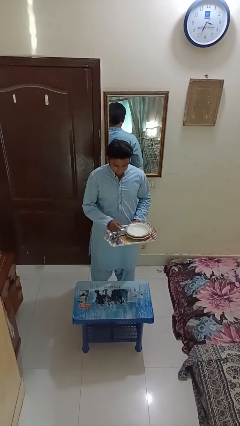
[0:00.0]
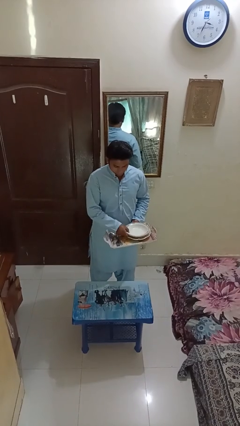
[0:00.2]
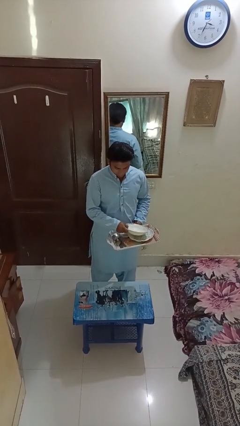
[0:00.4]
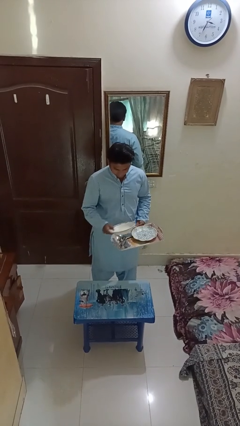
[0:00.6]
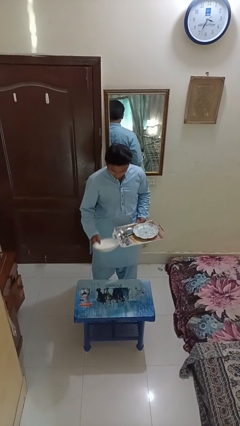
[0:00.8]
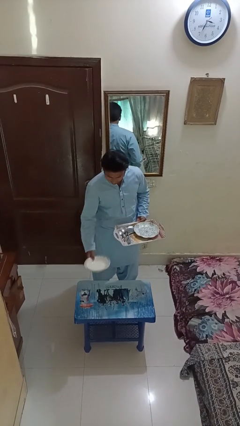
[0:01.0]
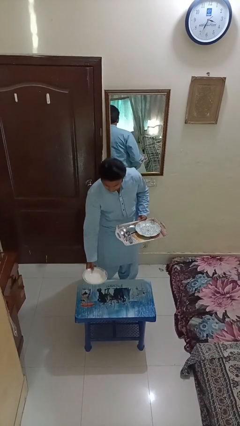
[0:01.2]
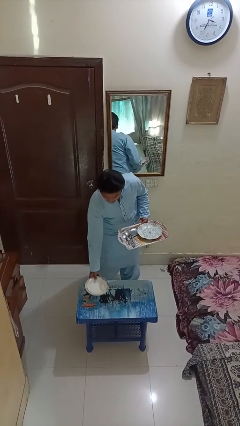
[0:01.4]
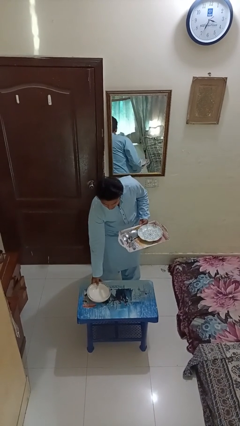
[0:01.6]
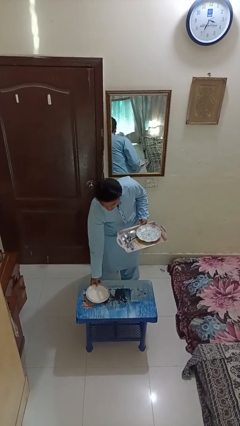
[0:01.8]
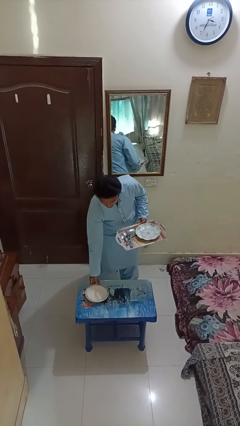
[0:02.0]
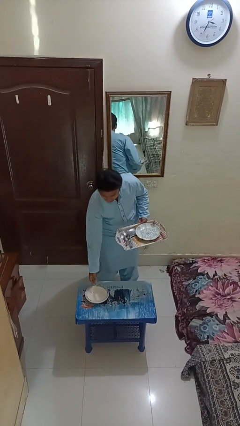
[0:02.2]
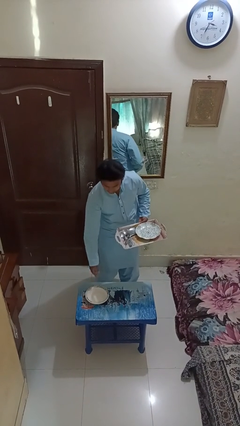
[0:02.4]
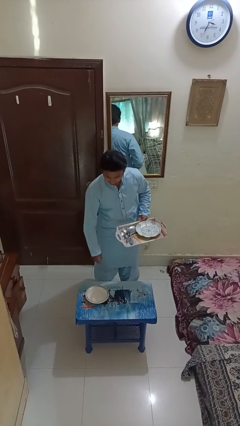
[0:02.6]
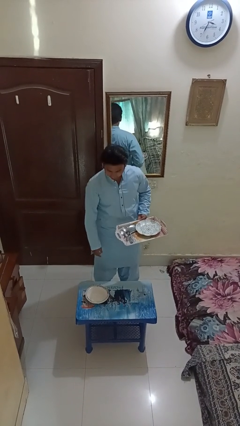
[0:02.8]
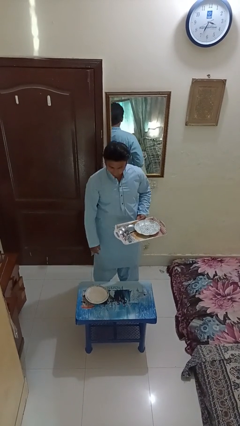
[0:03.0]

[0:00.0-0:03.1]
person sets table

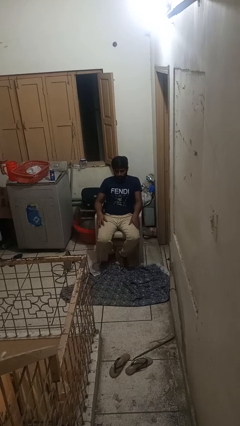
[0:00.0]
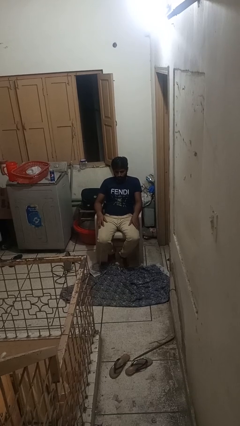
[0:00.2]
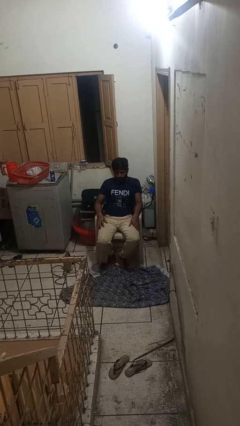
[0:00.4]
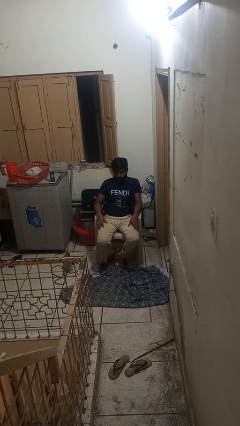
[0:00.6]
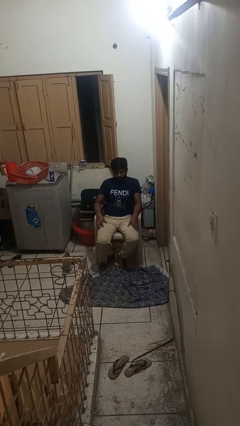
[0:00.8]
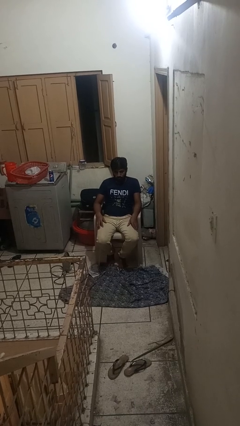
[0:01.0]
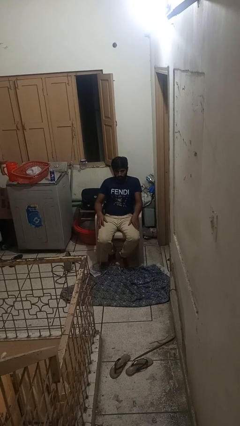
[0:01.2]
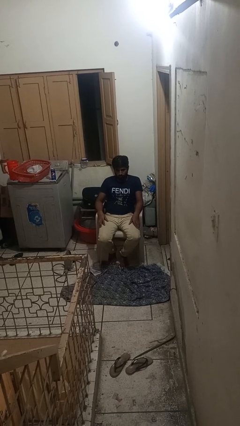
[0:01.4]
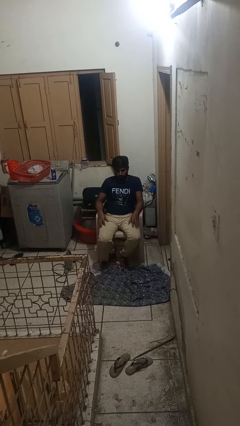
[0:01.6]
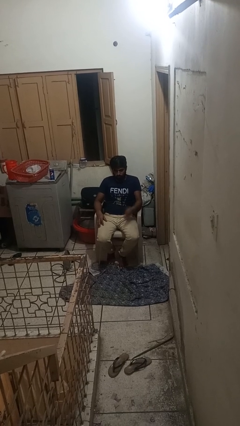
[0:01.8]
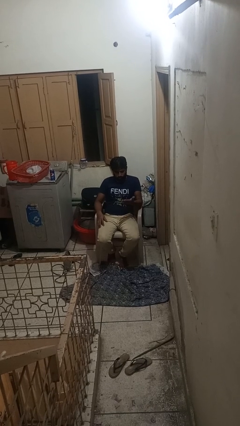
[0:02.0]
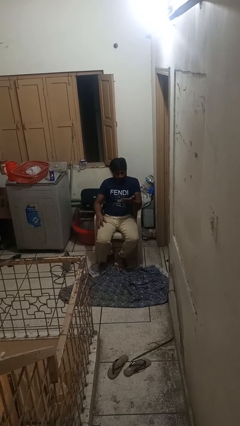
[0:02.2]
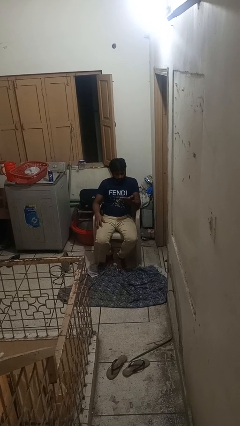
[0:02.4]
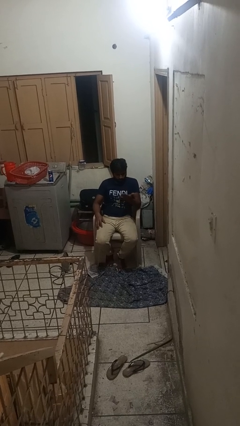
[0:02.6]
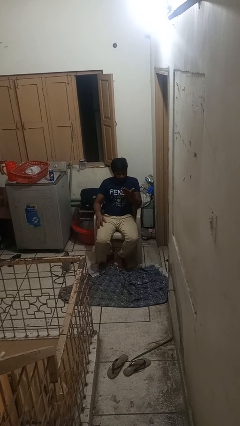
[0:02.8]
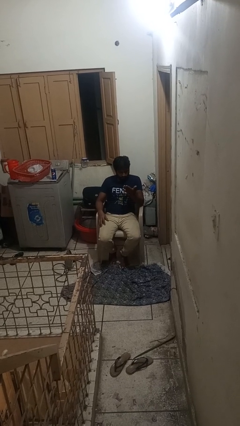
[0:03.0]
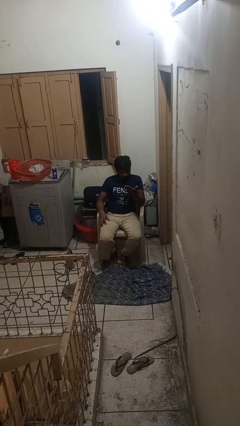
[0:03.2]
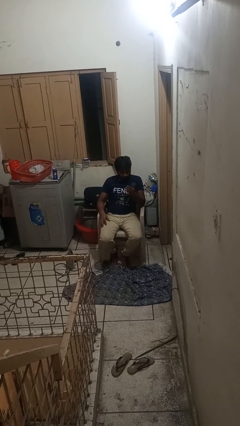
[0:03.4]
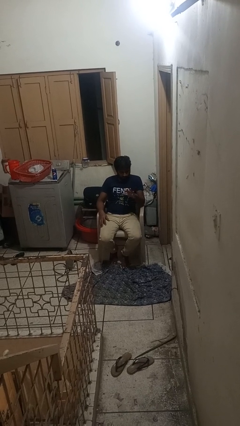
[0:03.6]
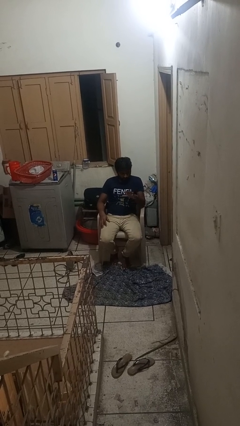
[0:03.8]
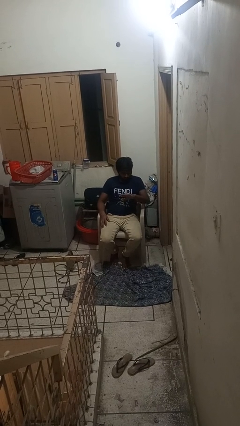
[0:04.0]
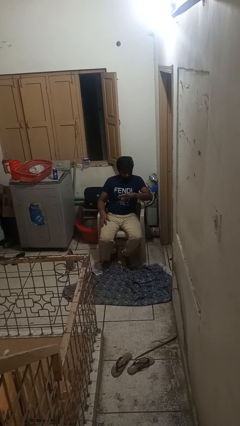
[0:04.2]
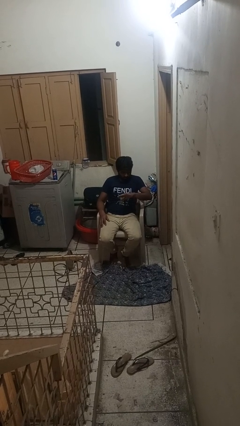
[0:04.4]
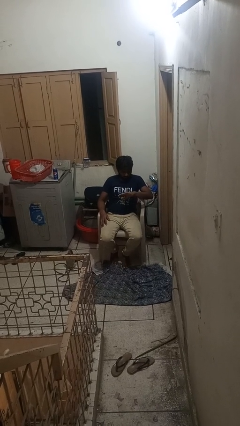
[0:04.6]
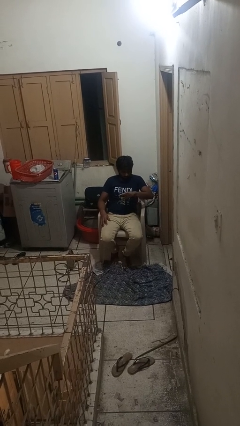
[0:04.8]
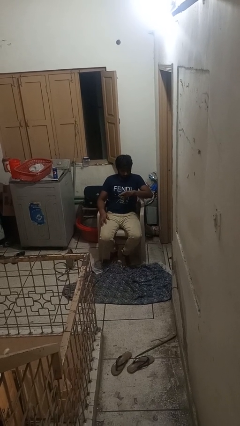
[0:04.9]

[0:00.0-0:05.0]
person looks at hands in lap

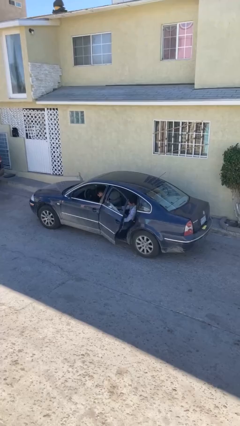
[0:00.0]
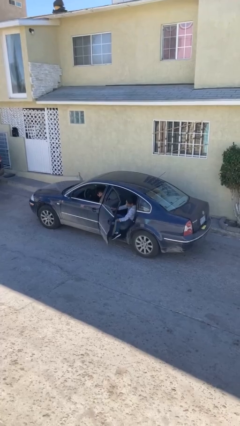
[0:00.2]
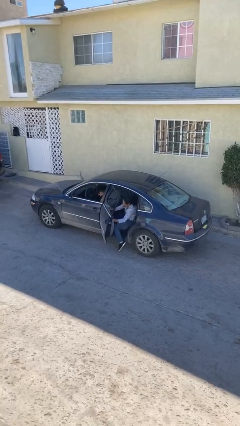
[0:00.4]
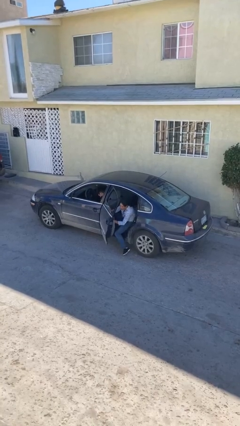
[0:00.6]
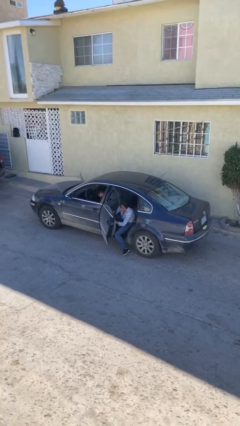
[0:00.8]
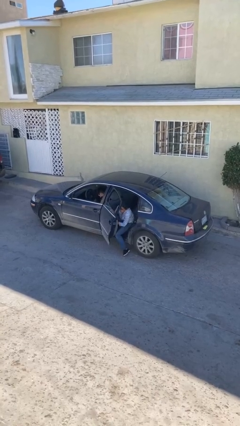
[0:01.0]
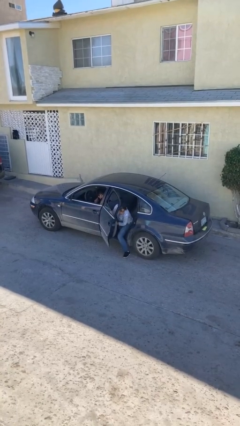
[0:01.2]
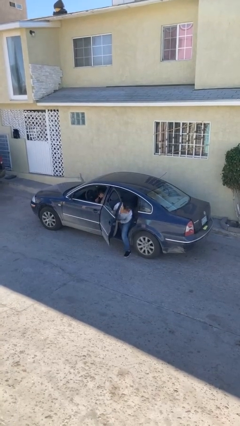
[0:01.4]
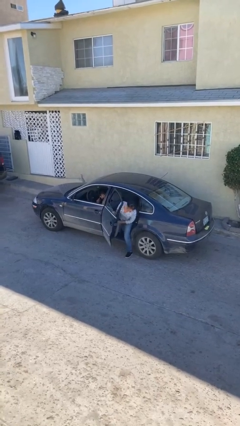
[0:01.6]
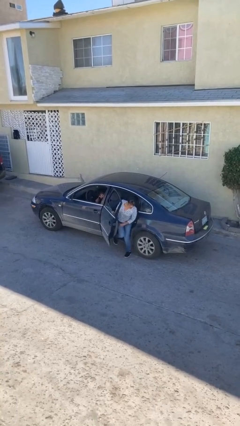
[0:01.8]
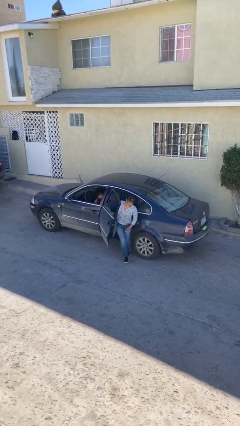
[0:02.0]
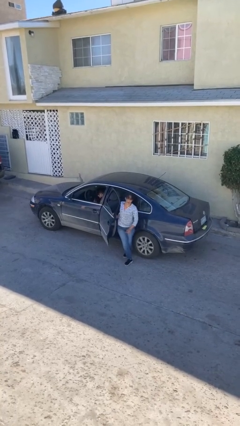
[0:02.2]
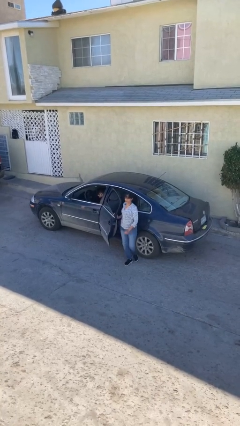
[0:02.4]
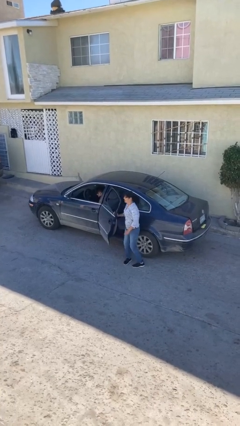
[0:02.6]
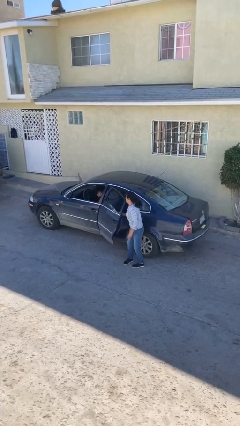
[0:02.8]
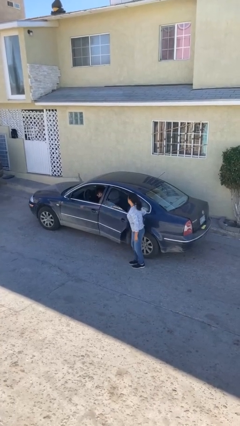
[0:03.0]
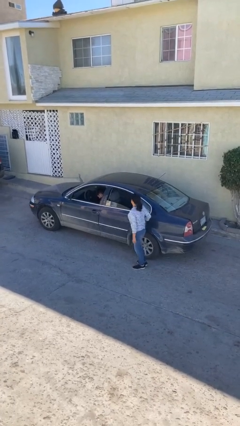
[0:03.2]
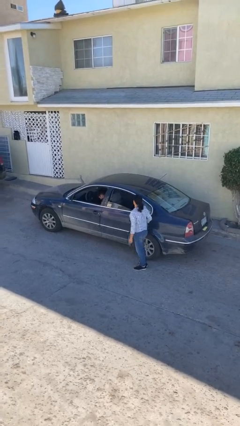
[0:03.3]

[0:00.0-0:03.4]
car drops off person

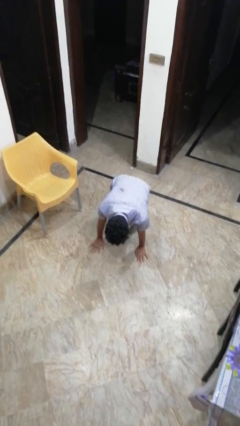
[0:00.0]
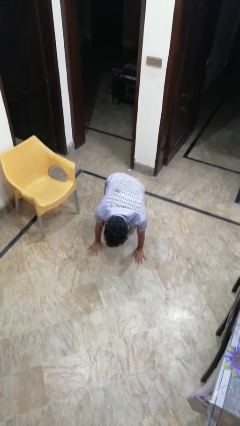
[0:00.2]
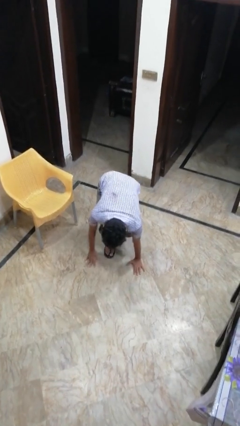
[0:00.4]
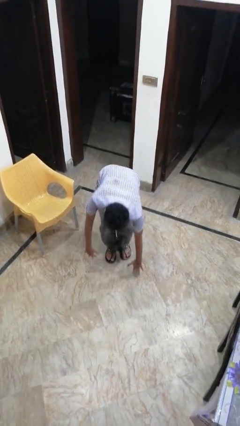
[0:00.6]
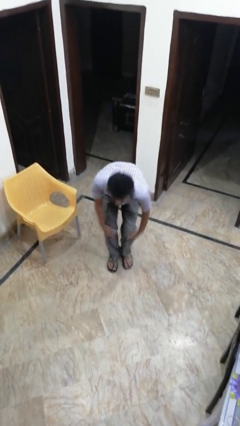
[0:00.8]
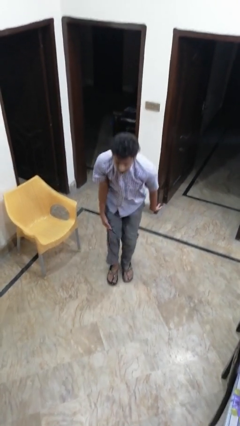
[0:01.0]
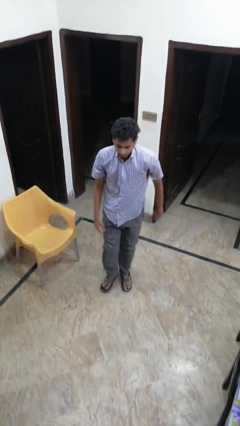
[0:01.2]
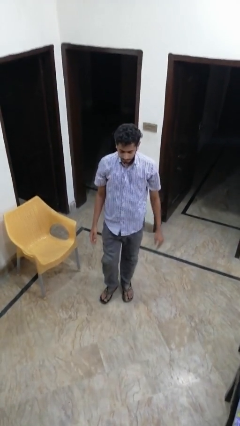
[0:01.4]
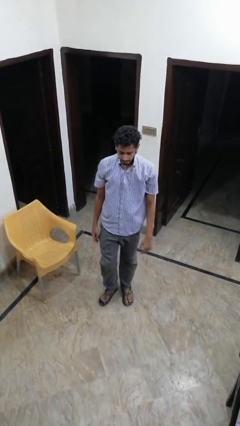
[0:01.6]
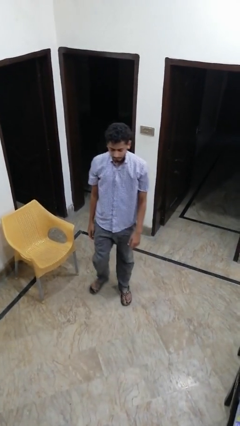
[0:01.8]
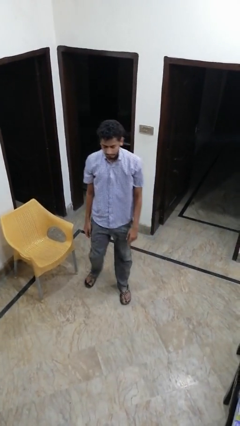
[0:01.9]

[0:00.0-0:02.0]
person stands up from floor

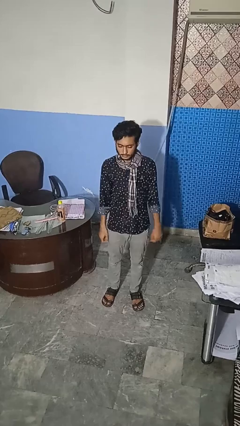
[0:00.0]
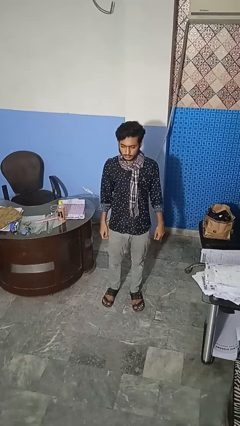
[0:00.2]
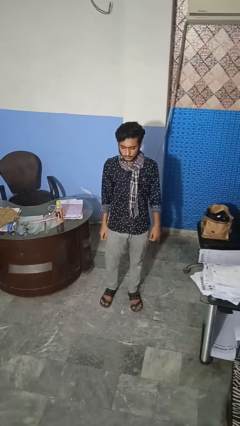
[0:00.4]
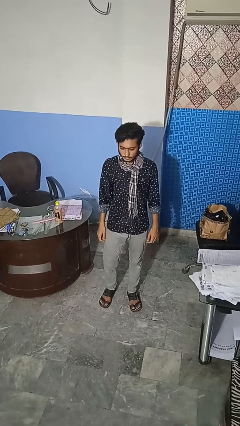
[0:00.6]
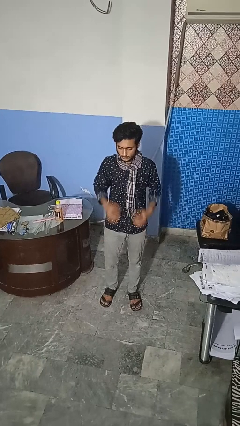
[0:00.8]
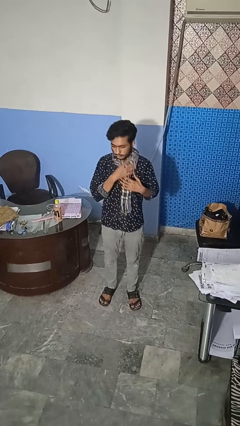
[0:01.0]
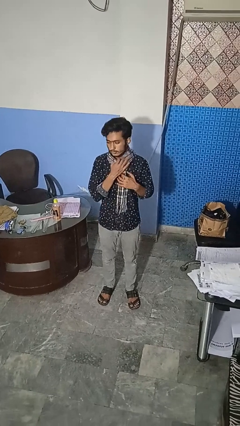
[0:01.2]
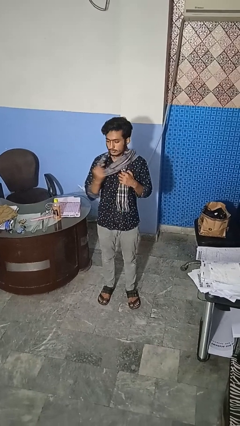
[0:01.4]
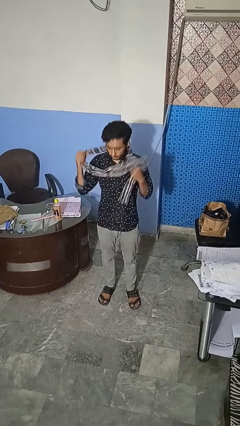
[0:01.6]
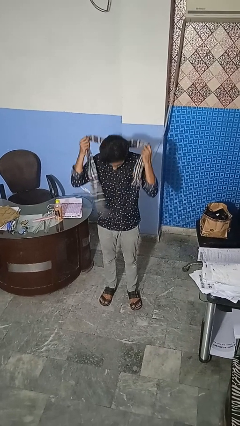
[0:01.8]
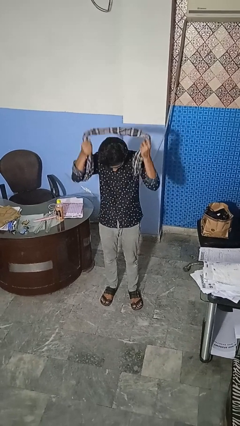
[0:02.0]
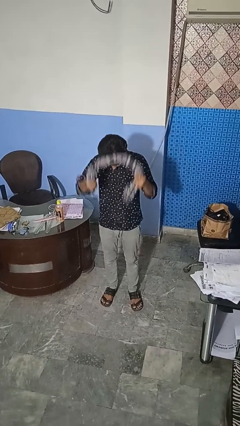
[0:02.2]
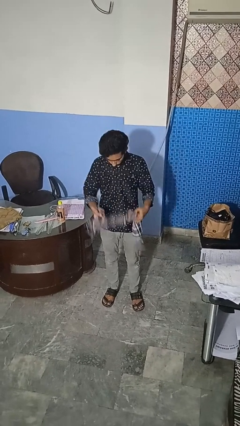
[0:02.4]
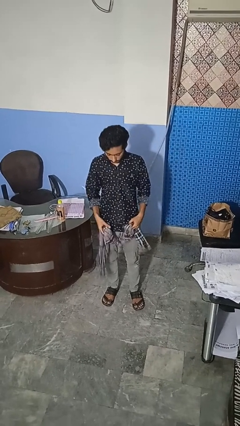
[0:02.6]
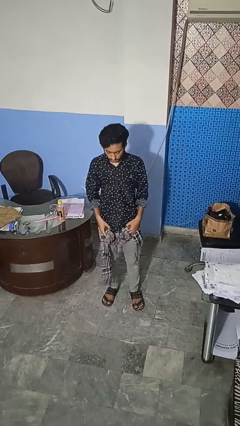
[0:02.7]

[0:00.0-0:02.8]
person takes off scarf

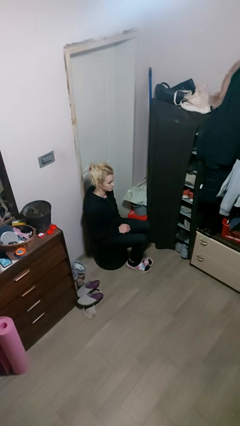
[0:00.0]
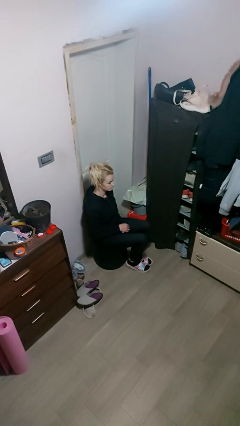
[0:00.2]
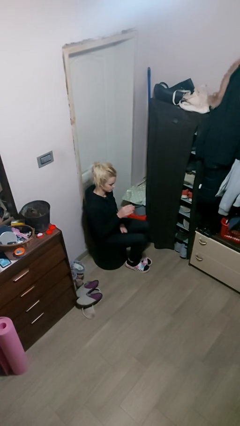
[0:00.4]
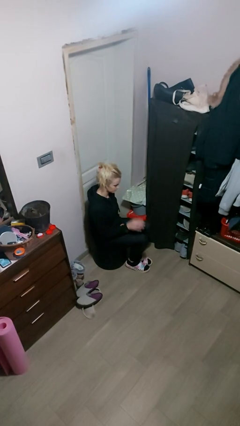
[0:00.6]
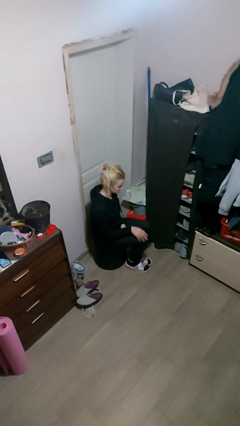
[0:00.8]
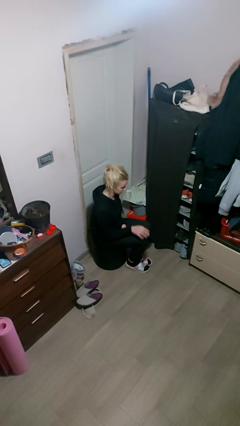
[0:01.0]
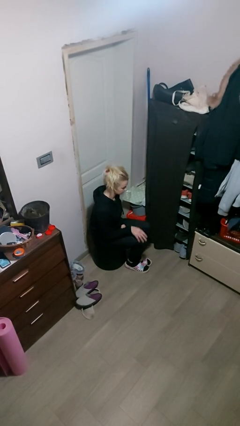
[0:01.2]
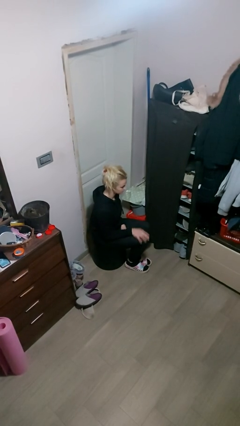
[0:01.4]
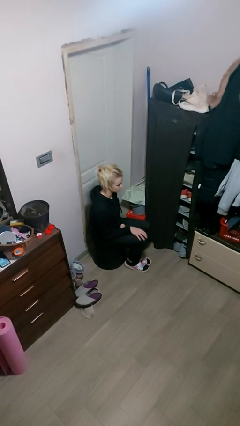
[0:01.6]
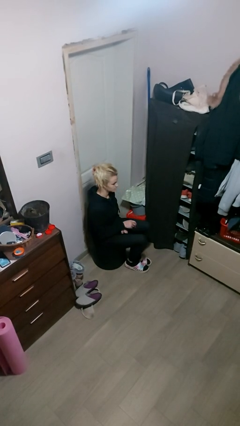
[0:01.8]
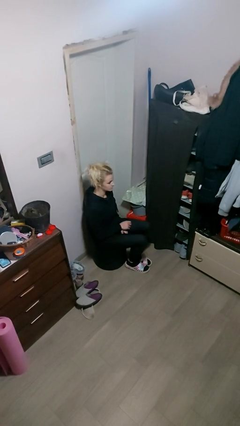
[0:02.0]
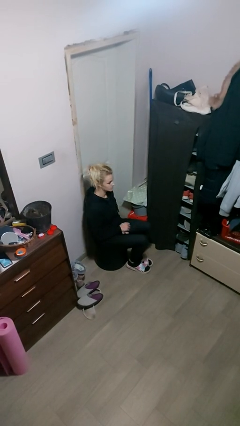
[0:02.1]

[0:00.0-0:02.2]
person slaps hands on thighs
